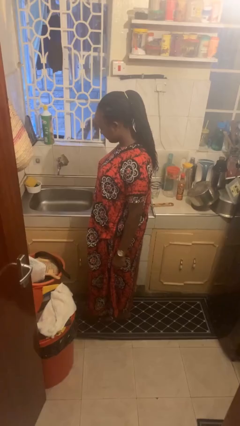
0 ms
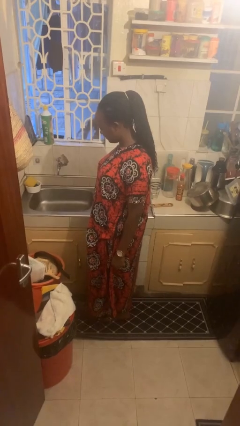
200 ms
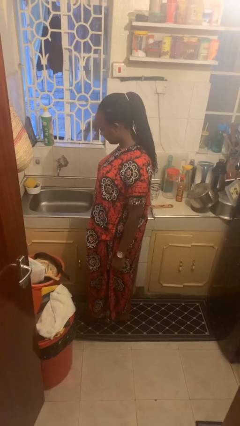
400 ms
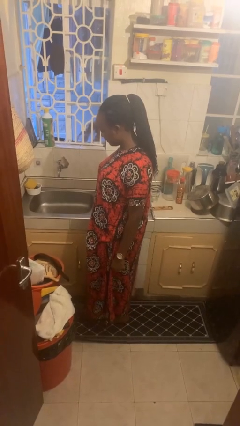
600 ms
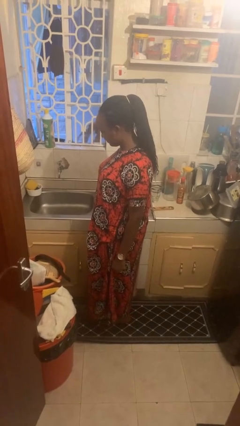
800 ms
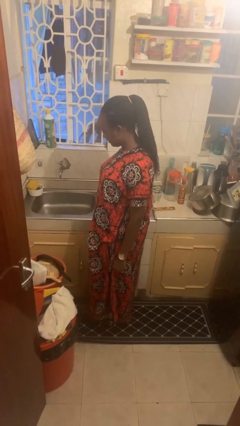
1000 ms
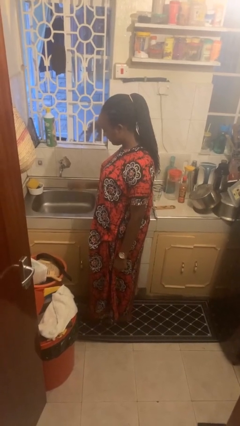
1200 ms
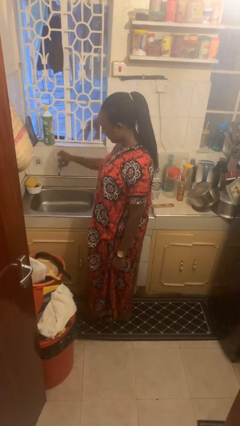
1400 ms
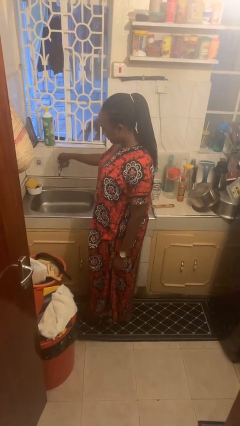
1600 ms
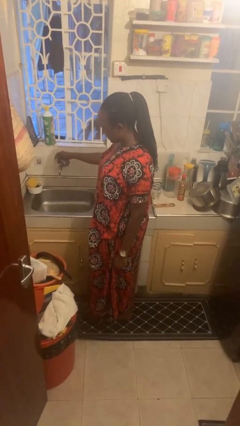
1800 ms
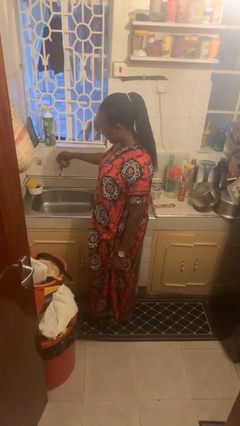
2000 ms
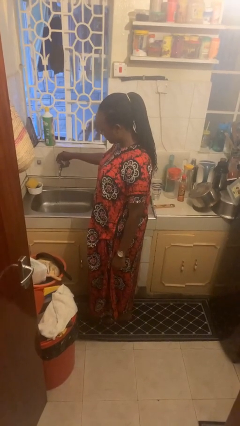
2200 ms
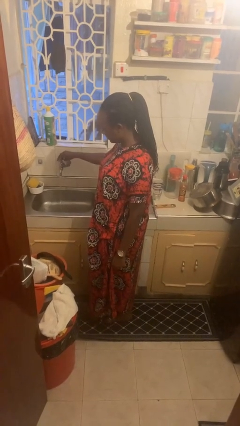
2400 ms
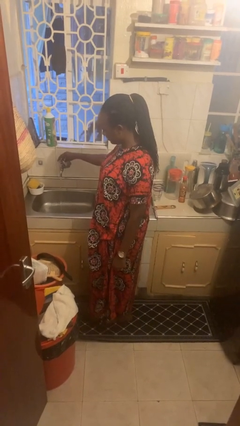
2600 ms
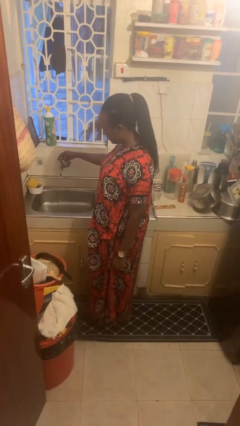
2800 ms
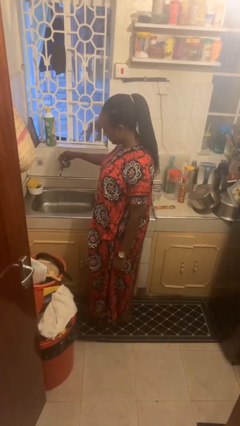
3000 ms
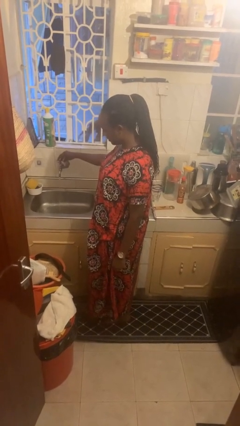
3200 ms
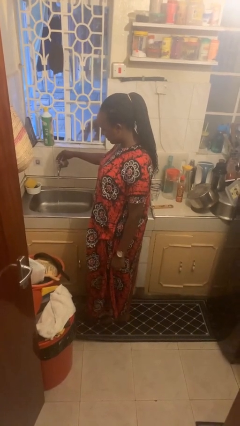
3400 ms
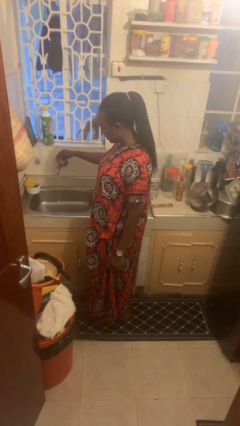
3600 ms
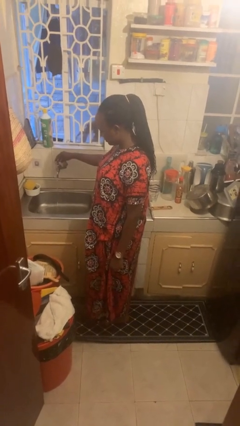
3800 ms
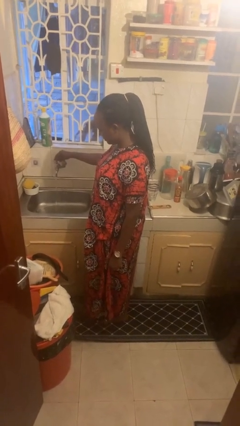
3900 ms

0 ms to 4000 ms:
person turns on faucet

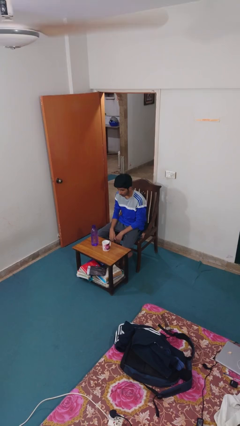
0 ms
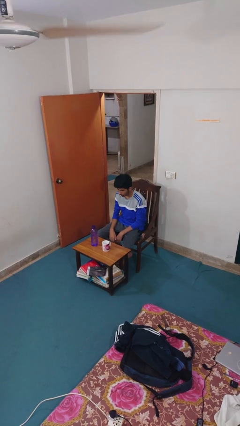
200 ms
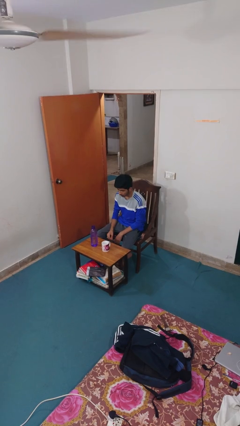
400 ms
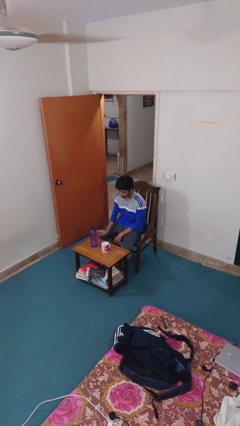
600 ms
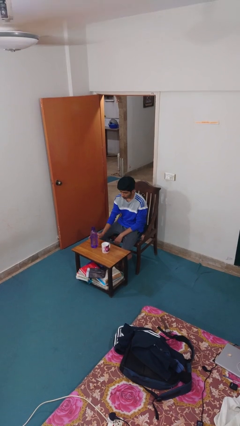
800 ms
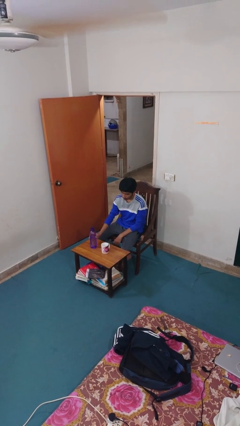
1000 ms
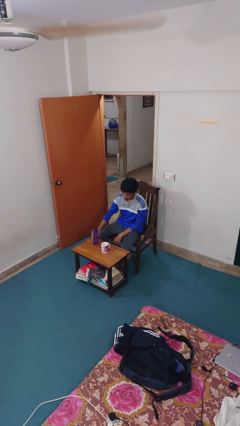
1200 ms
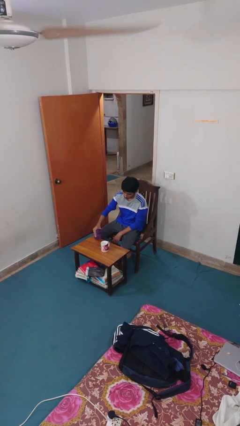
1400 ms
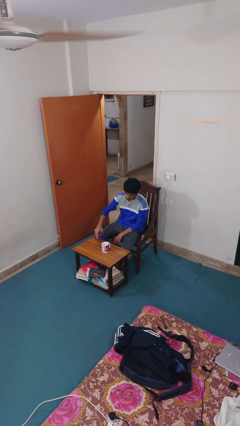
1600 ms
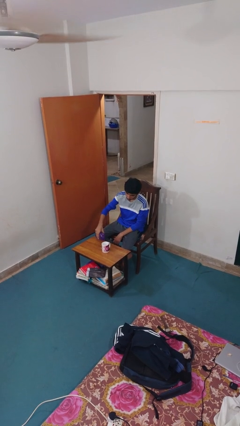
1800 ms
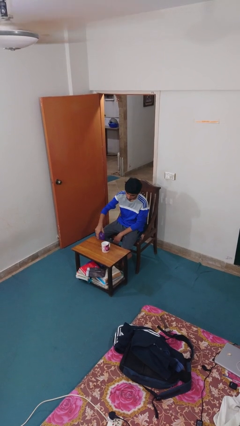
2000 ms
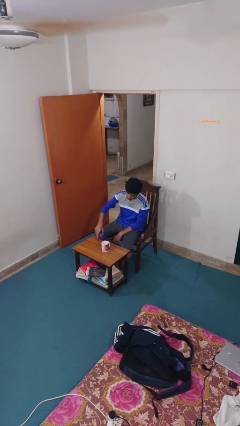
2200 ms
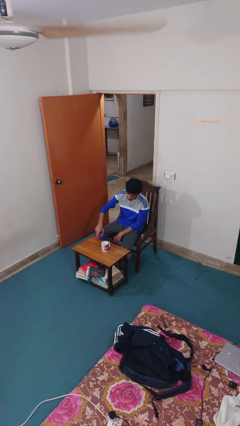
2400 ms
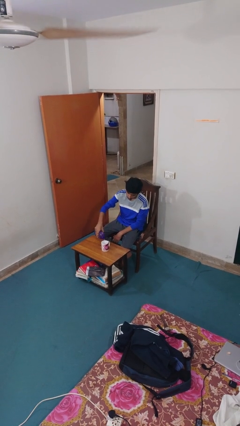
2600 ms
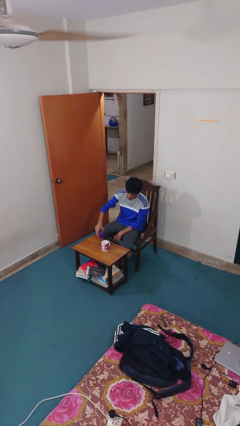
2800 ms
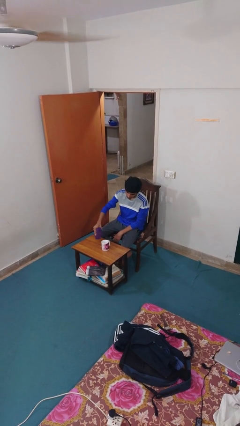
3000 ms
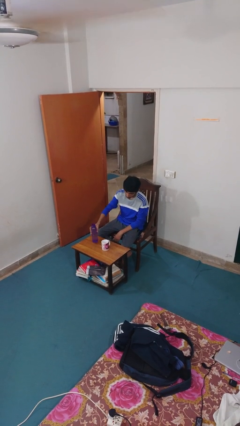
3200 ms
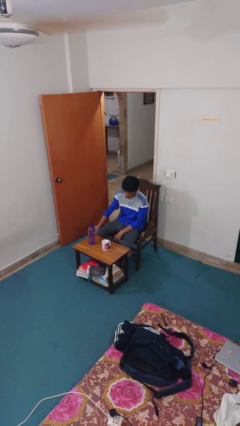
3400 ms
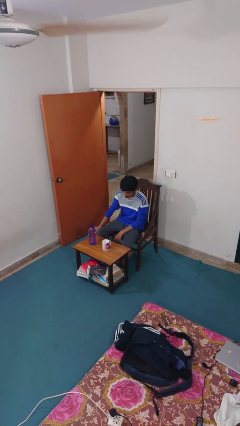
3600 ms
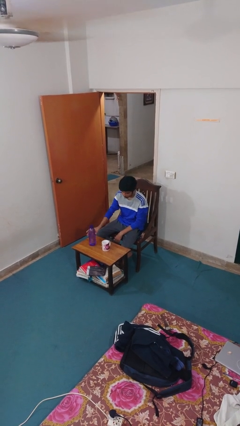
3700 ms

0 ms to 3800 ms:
person pours liquid into cup

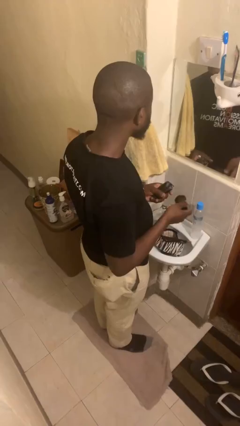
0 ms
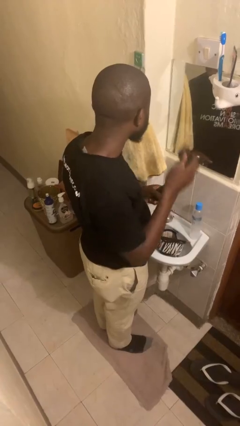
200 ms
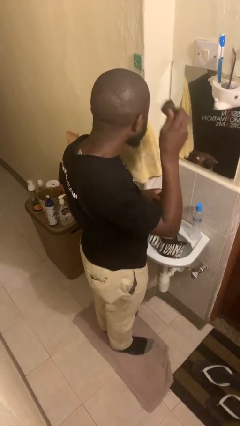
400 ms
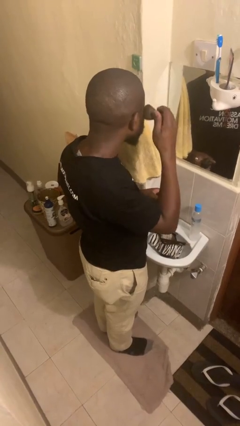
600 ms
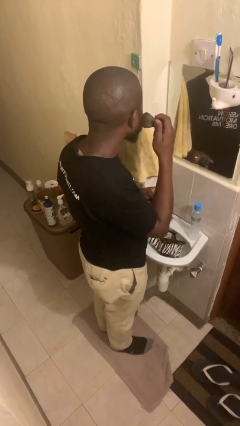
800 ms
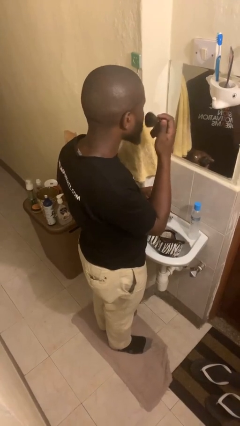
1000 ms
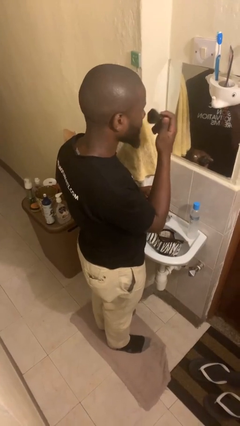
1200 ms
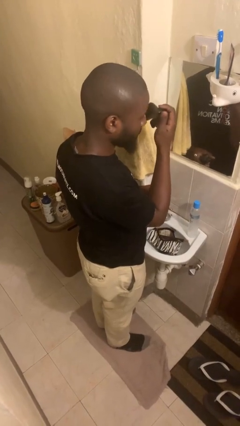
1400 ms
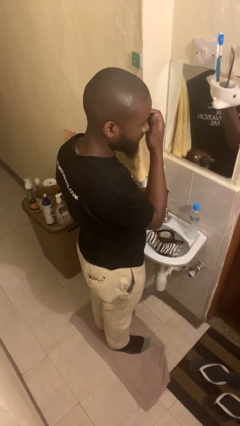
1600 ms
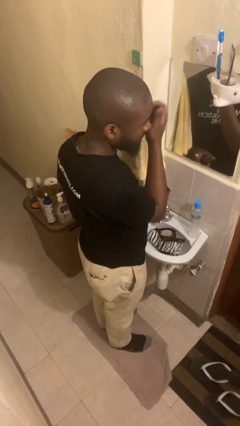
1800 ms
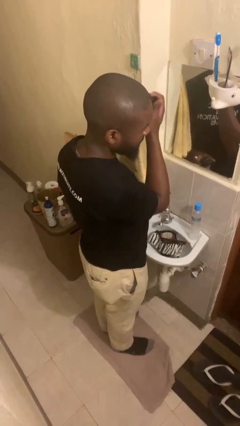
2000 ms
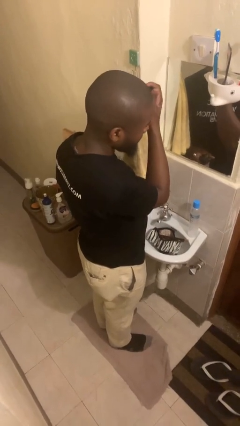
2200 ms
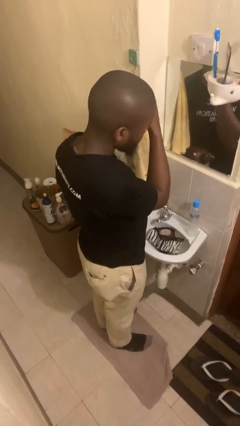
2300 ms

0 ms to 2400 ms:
person applies foundation makeup

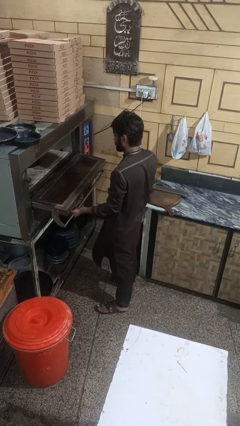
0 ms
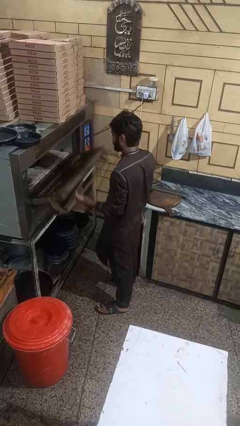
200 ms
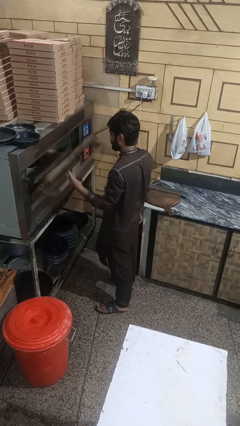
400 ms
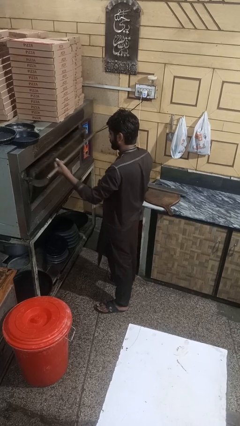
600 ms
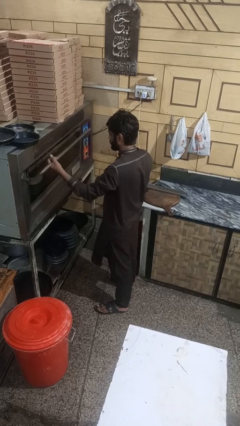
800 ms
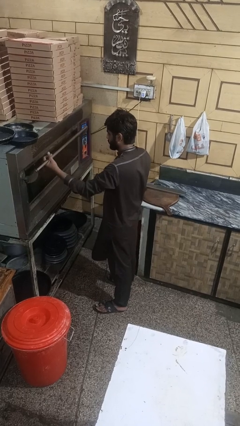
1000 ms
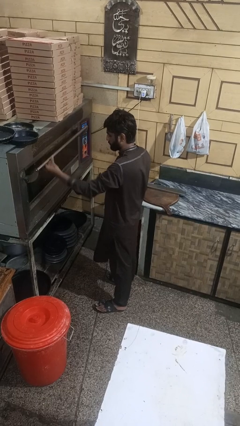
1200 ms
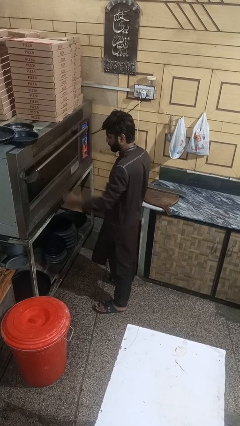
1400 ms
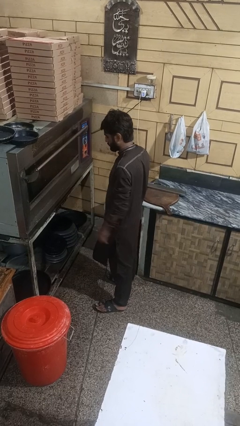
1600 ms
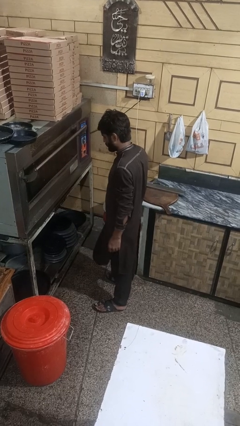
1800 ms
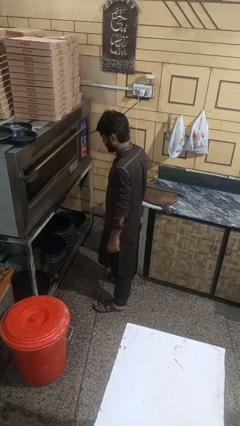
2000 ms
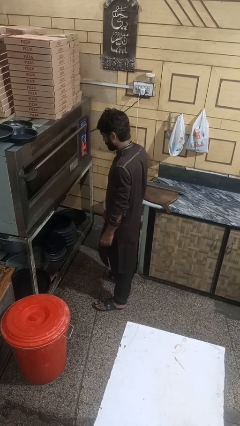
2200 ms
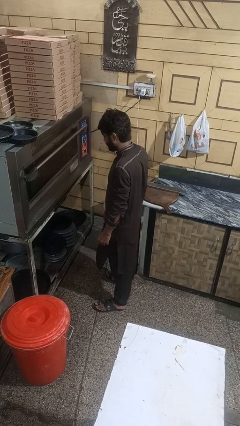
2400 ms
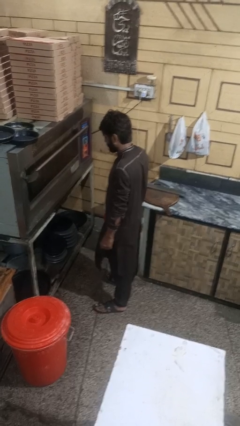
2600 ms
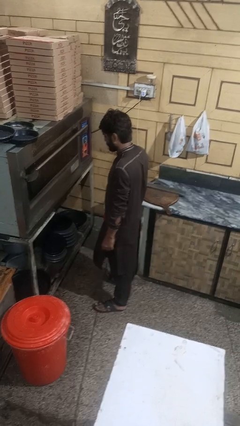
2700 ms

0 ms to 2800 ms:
person closes microwave

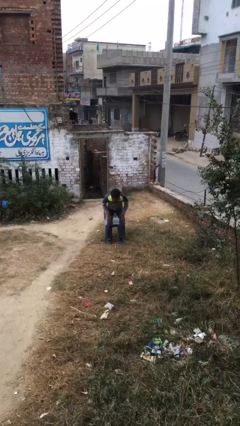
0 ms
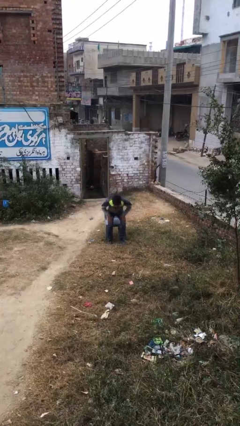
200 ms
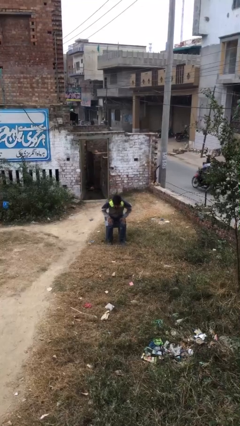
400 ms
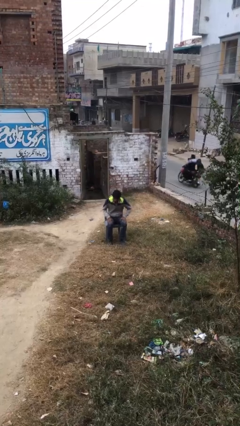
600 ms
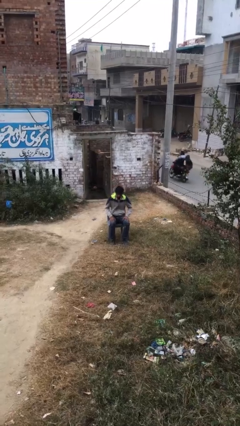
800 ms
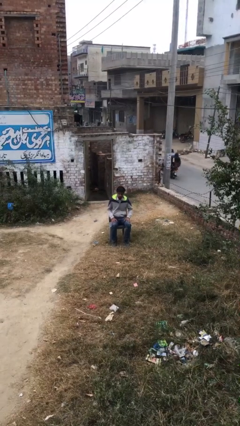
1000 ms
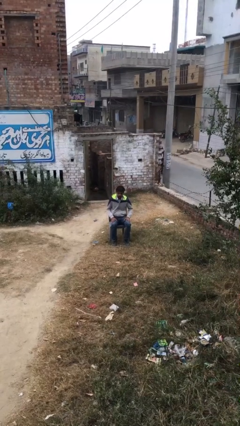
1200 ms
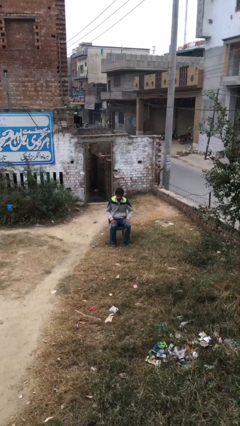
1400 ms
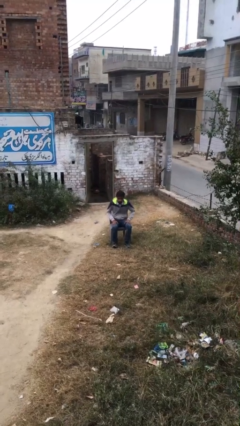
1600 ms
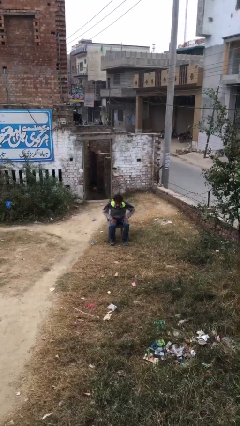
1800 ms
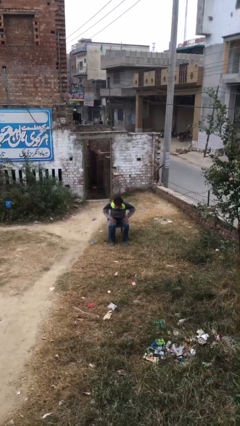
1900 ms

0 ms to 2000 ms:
person sits down

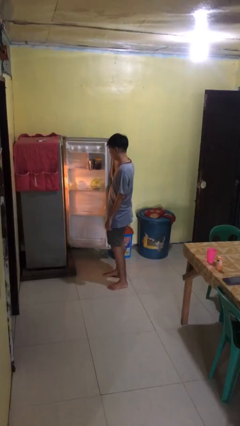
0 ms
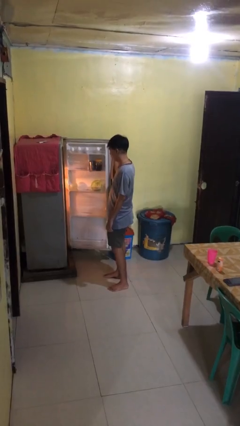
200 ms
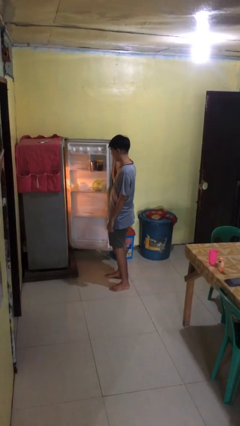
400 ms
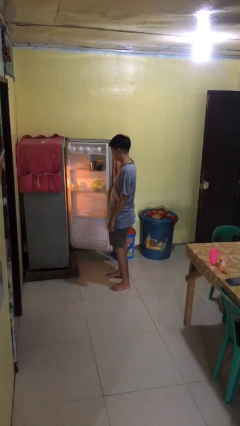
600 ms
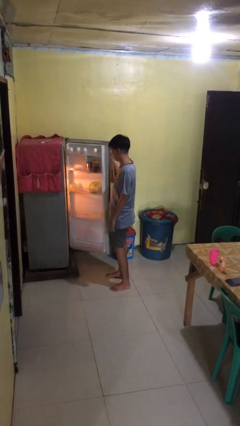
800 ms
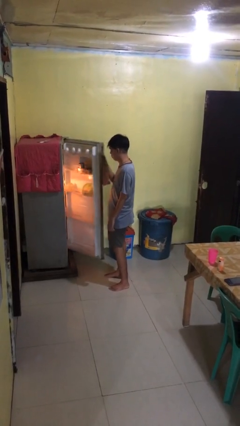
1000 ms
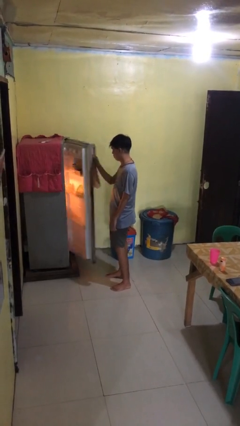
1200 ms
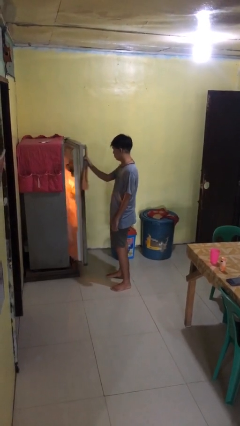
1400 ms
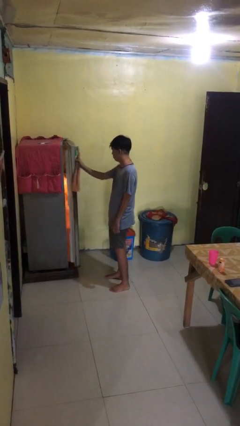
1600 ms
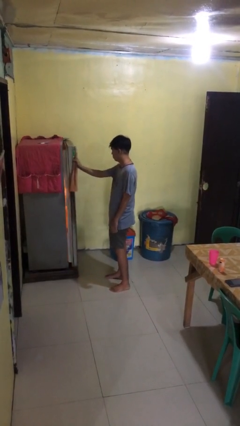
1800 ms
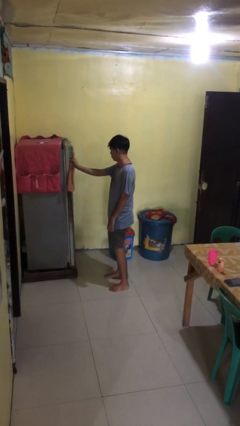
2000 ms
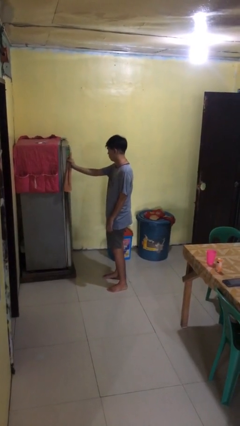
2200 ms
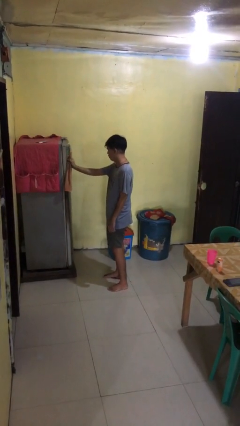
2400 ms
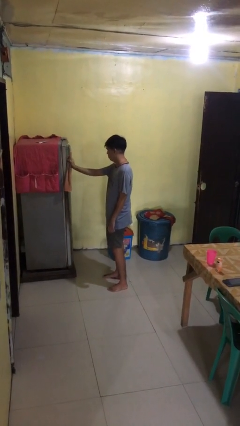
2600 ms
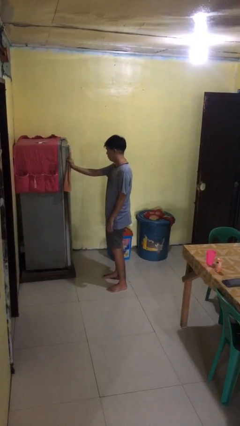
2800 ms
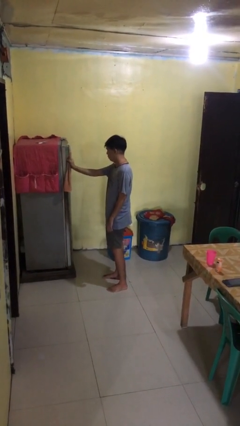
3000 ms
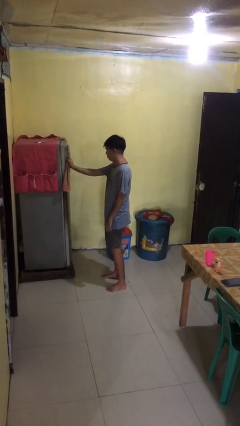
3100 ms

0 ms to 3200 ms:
person closes refrigerator
